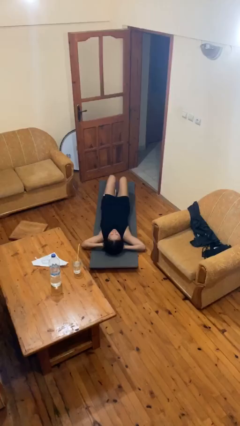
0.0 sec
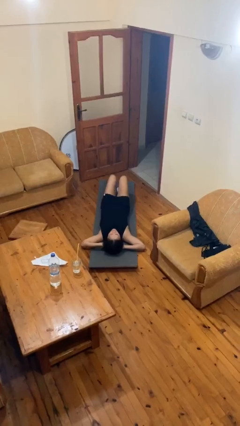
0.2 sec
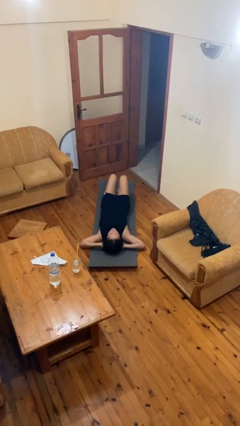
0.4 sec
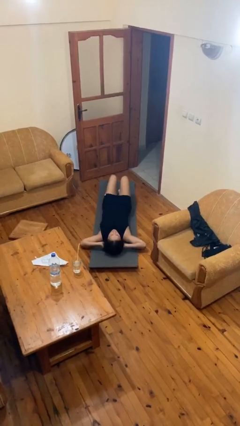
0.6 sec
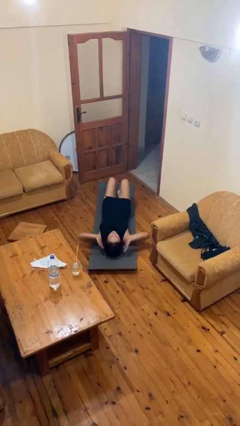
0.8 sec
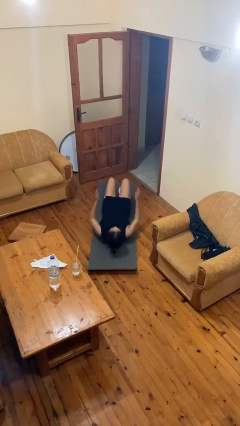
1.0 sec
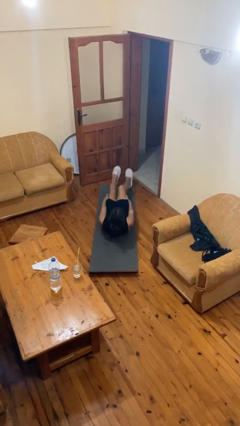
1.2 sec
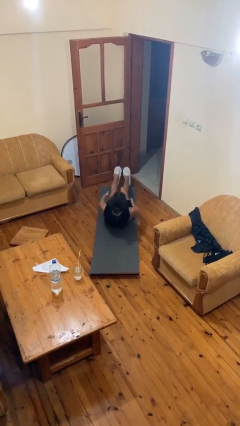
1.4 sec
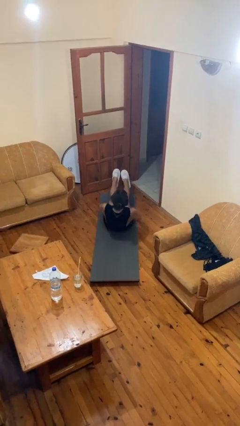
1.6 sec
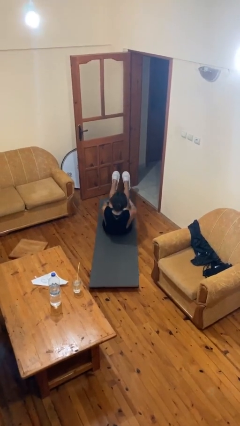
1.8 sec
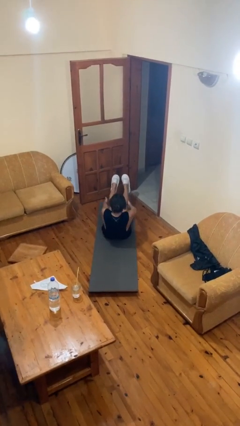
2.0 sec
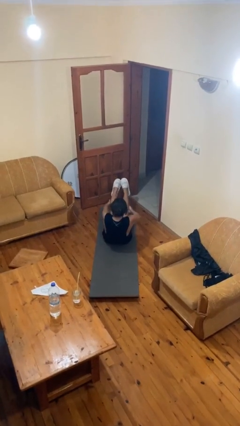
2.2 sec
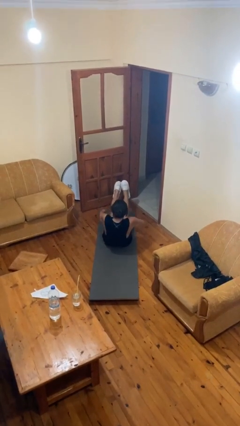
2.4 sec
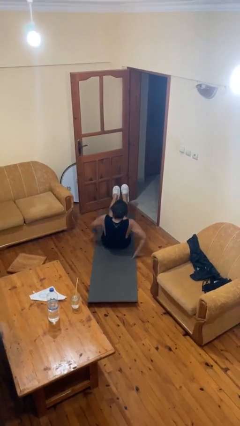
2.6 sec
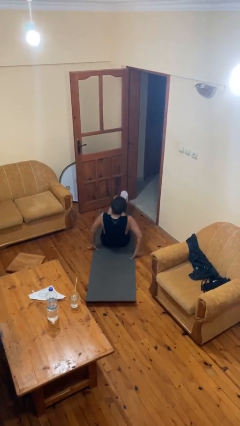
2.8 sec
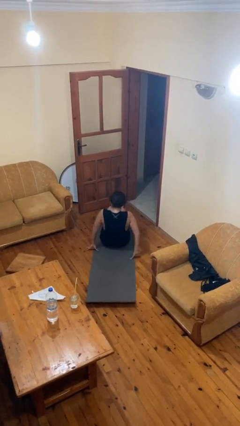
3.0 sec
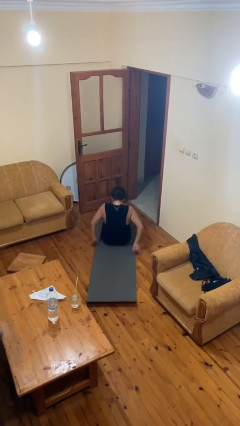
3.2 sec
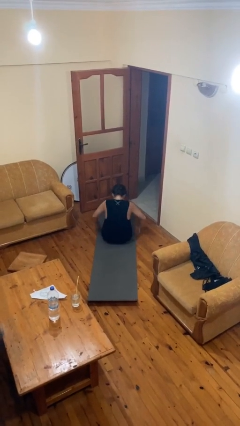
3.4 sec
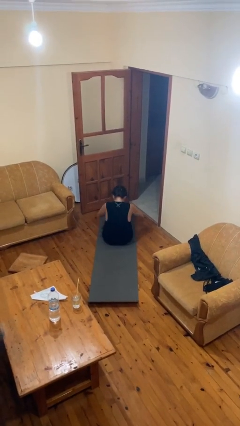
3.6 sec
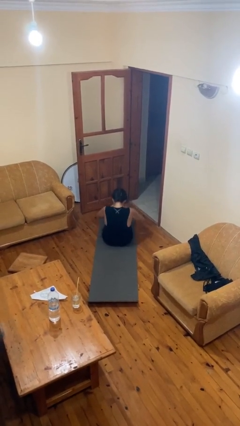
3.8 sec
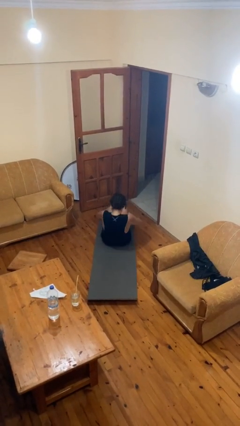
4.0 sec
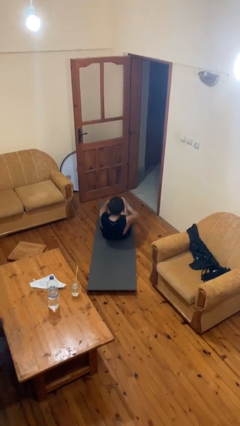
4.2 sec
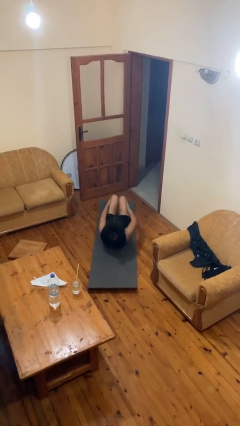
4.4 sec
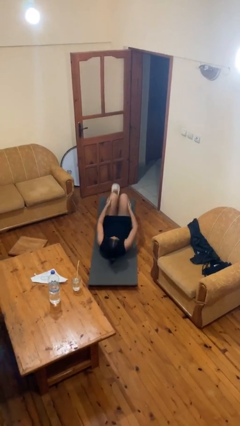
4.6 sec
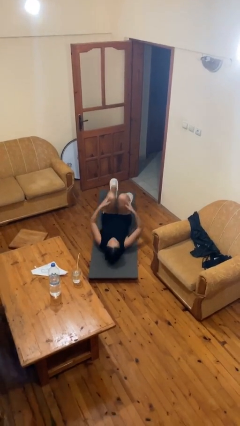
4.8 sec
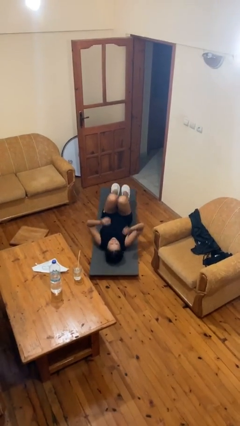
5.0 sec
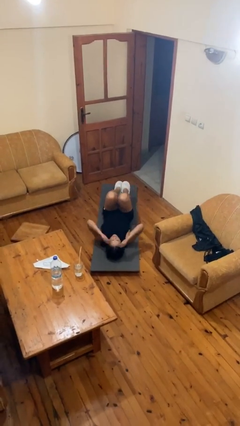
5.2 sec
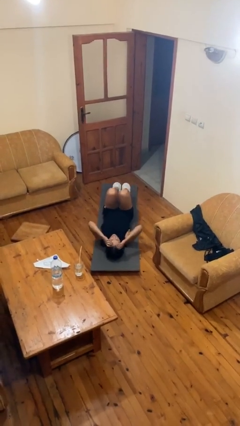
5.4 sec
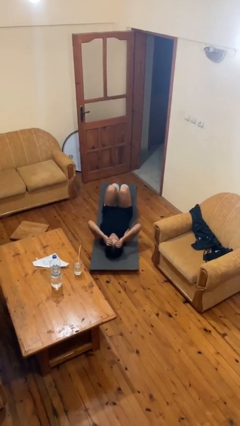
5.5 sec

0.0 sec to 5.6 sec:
person exercises with situp

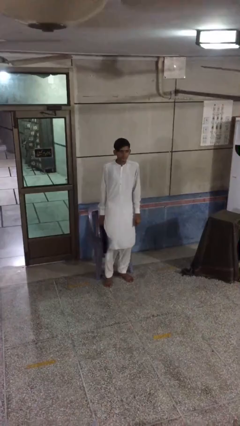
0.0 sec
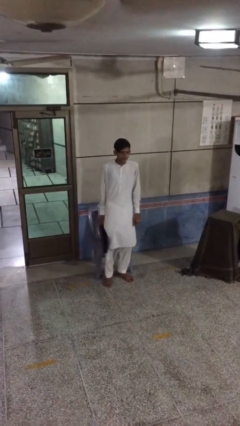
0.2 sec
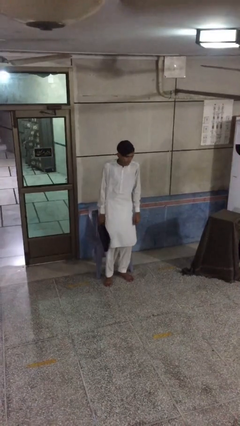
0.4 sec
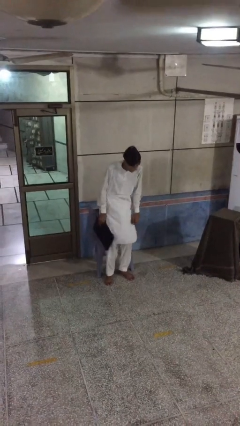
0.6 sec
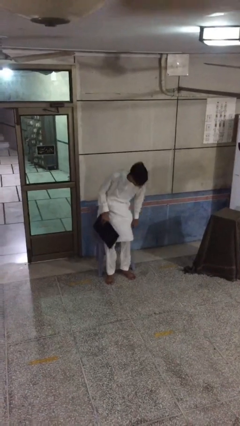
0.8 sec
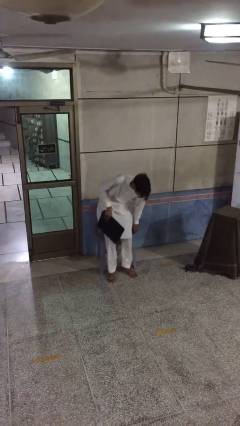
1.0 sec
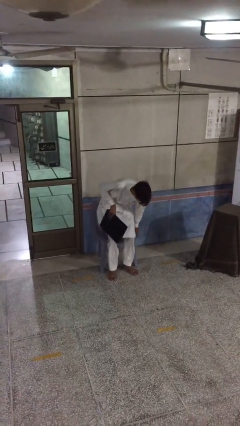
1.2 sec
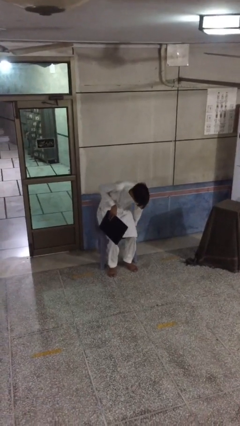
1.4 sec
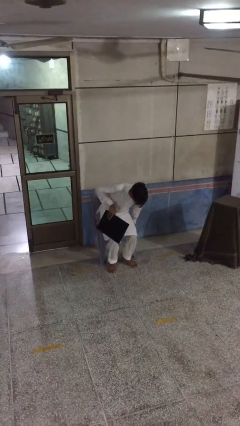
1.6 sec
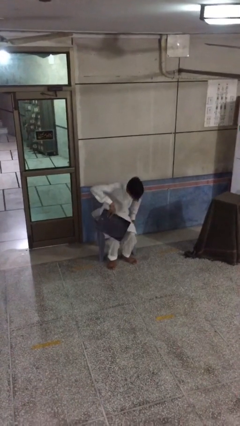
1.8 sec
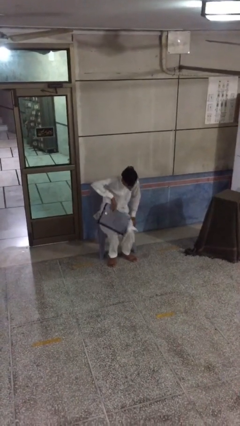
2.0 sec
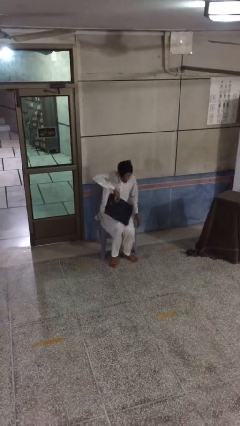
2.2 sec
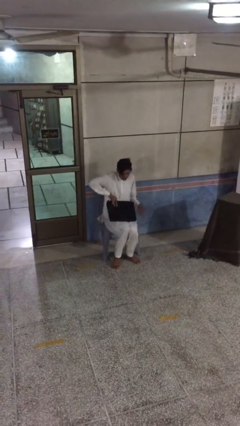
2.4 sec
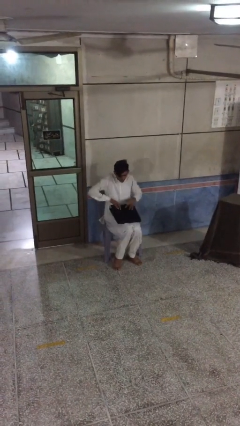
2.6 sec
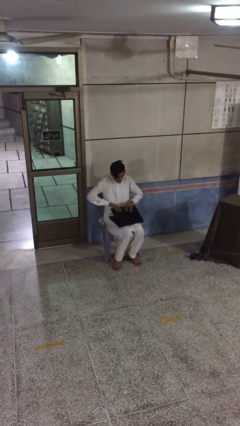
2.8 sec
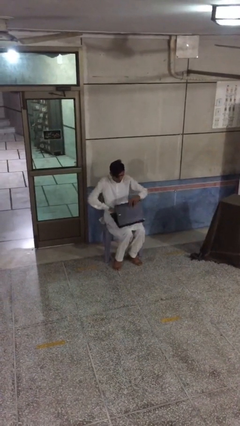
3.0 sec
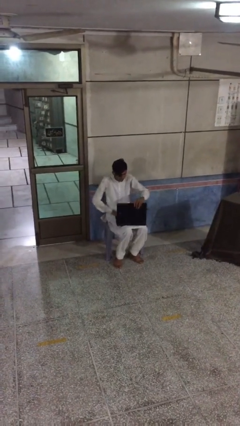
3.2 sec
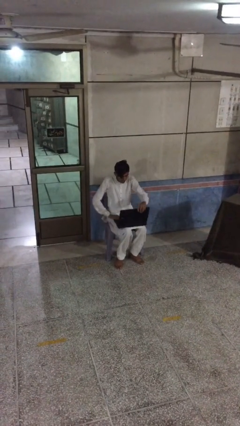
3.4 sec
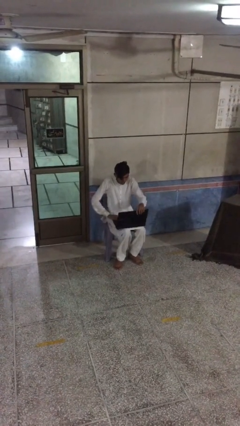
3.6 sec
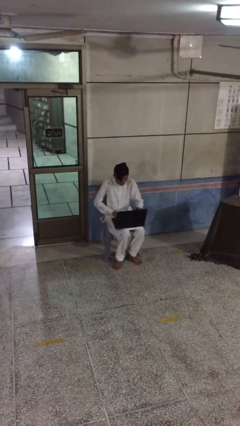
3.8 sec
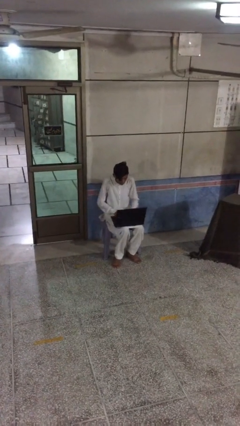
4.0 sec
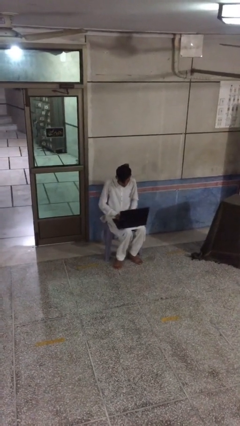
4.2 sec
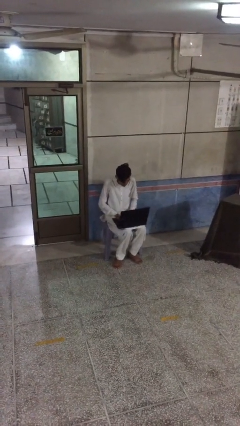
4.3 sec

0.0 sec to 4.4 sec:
person sits down

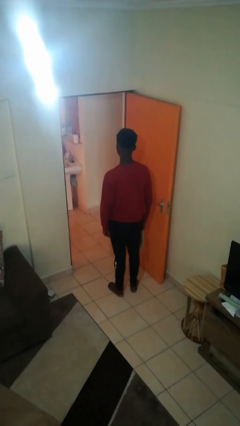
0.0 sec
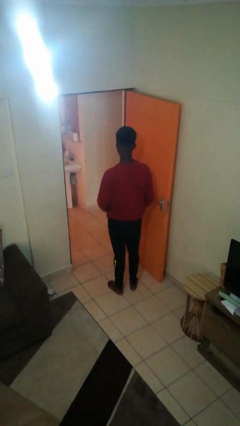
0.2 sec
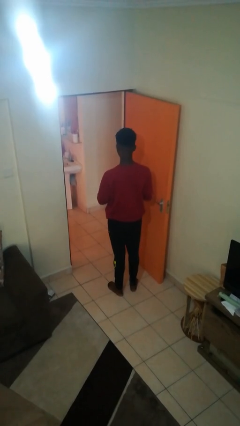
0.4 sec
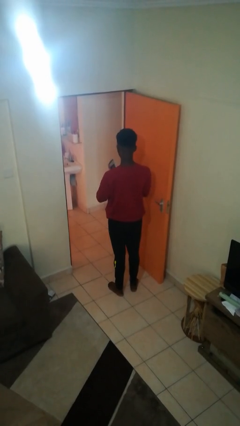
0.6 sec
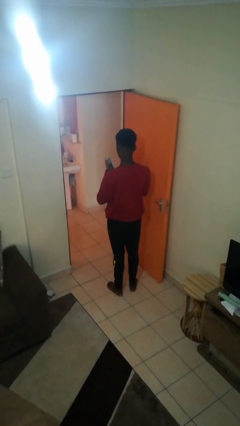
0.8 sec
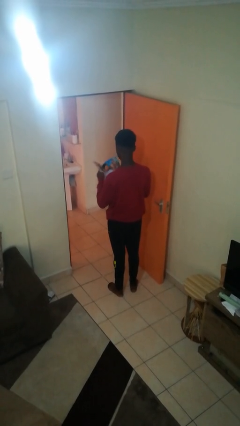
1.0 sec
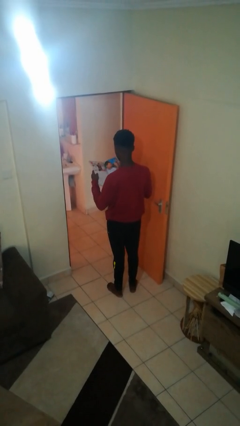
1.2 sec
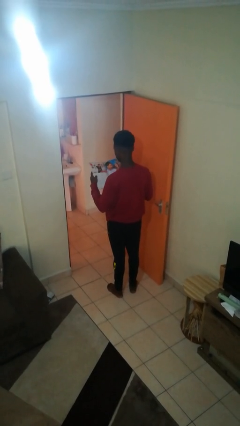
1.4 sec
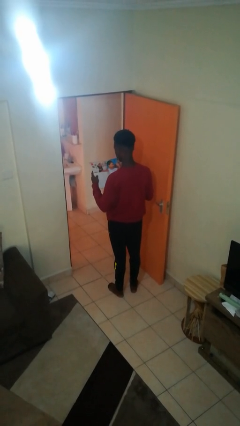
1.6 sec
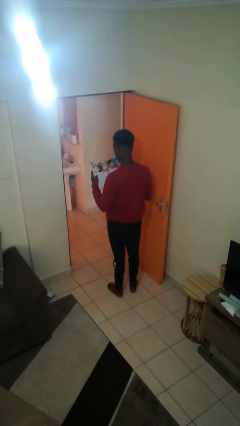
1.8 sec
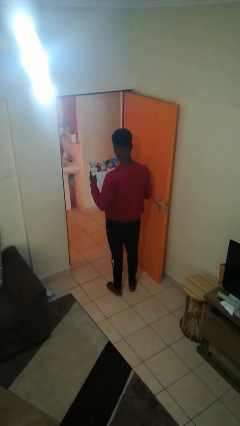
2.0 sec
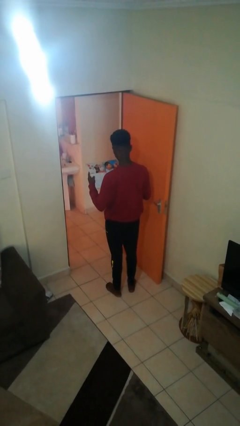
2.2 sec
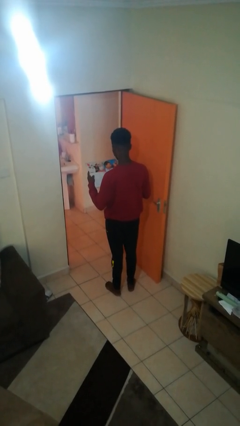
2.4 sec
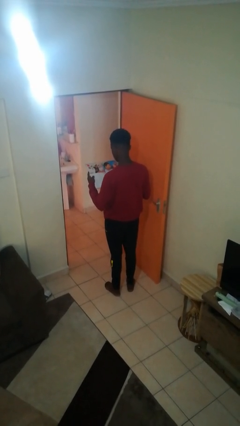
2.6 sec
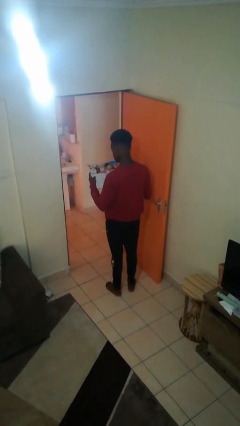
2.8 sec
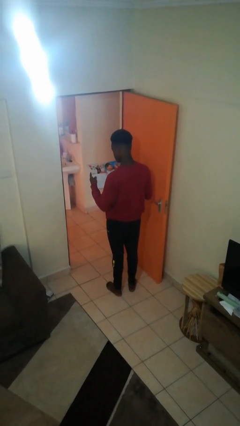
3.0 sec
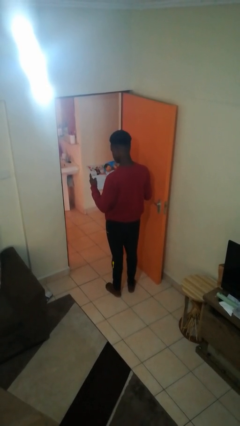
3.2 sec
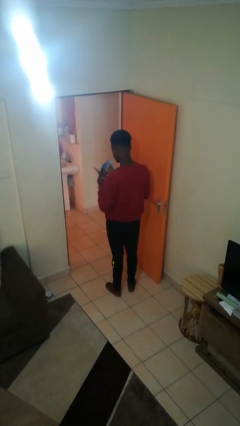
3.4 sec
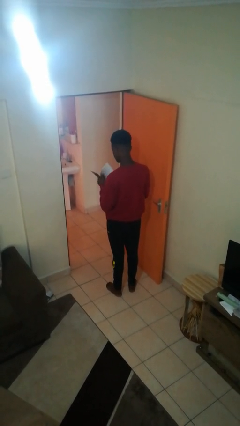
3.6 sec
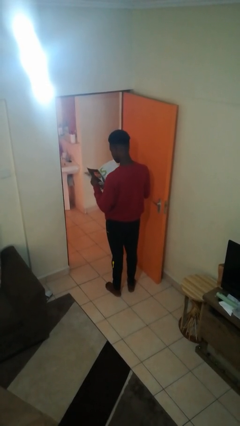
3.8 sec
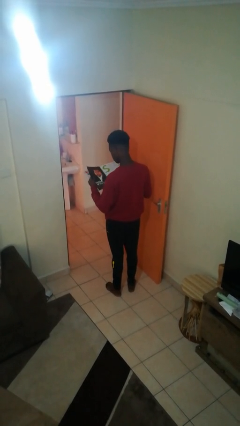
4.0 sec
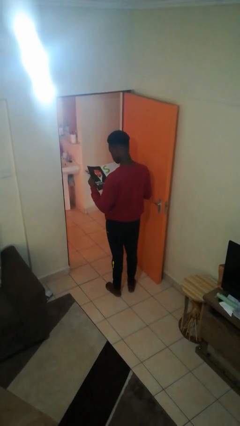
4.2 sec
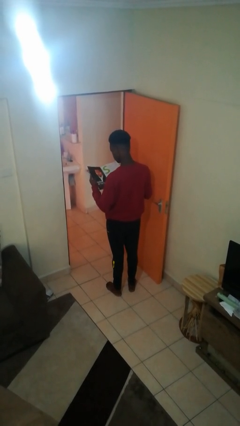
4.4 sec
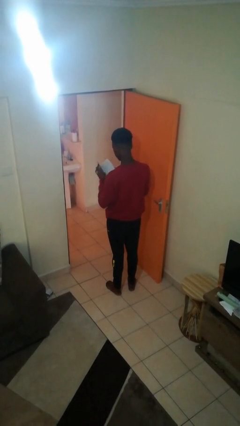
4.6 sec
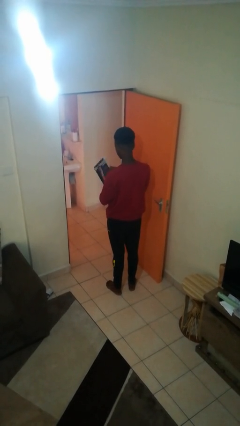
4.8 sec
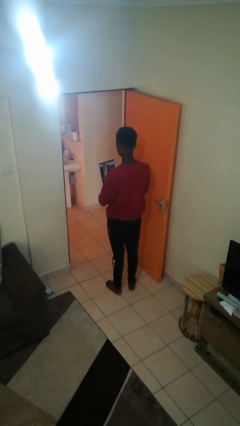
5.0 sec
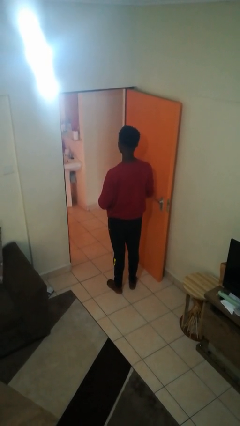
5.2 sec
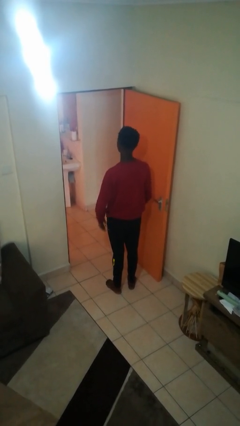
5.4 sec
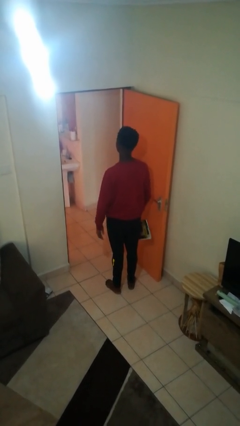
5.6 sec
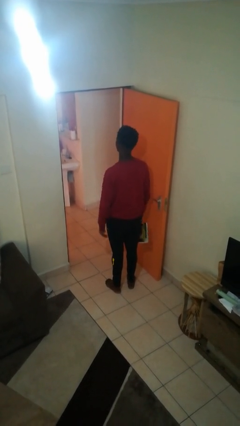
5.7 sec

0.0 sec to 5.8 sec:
person reads magazine

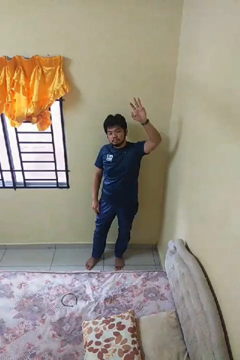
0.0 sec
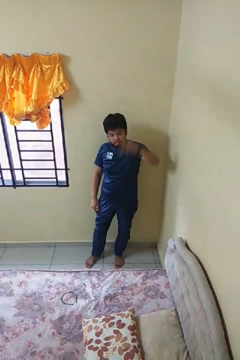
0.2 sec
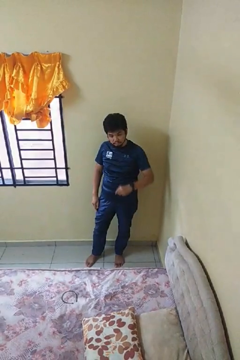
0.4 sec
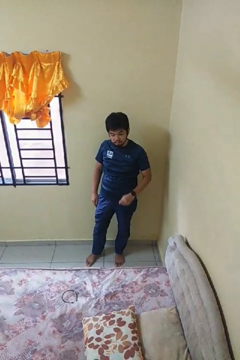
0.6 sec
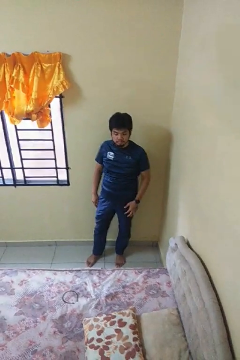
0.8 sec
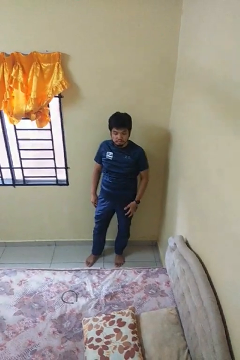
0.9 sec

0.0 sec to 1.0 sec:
person gestures swipe down

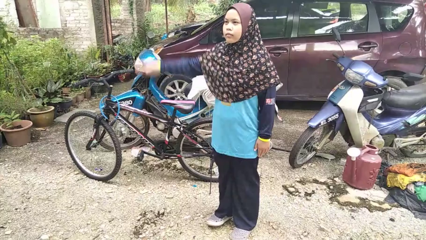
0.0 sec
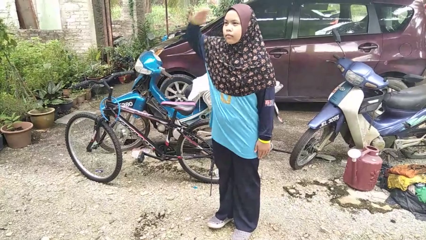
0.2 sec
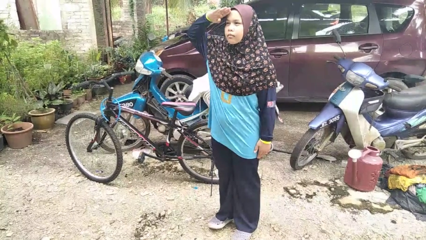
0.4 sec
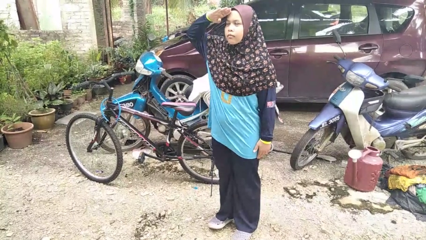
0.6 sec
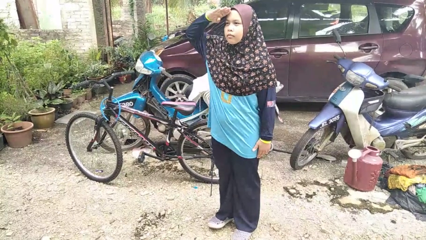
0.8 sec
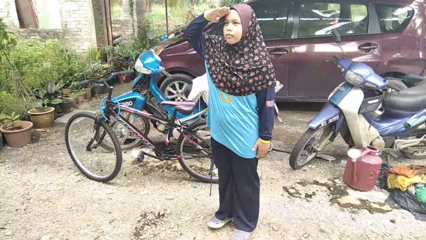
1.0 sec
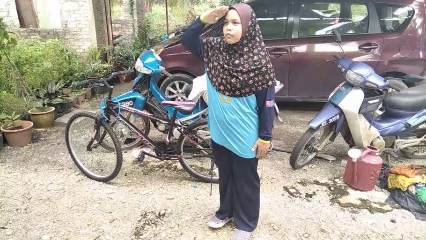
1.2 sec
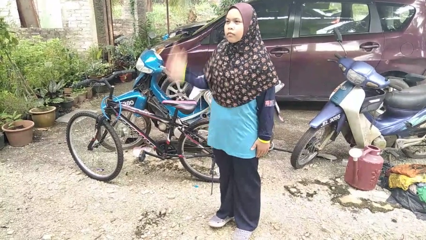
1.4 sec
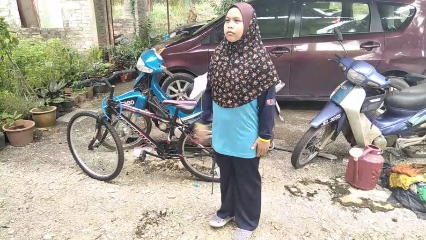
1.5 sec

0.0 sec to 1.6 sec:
person salutes
